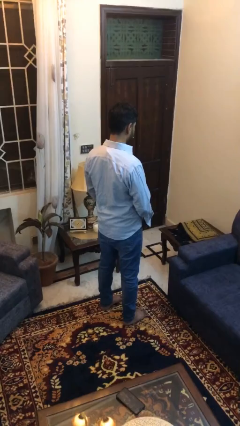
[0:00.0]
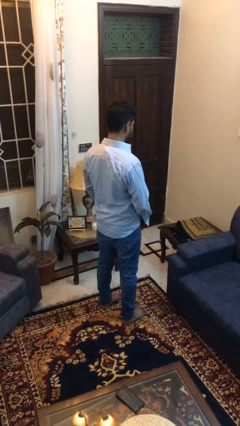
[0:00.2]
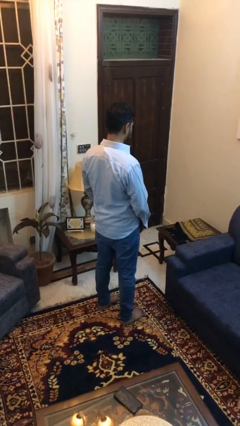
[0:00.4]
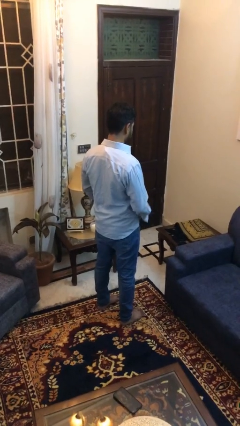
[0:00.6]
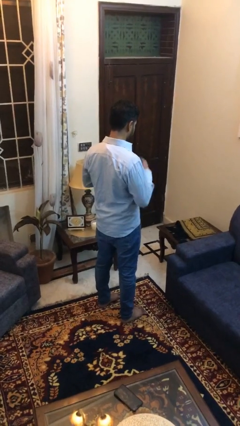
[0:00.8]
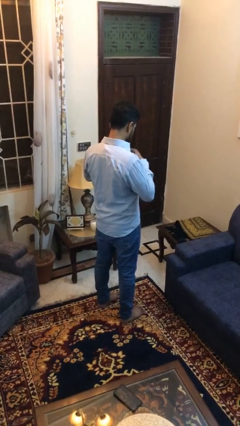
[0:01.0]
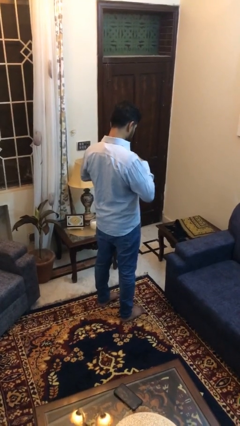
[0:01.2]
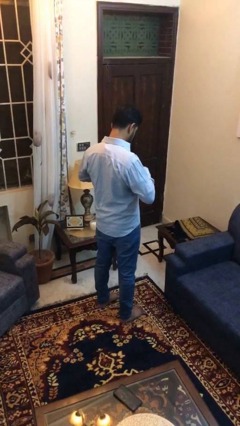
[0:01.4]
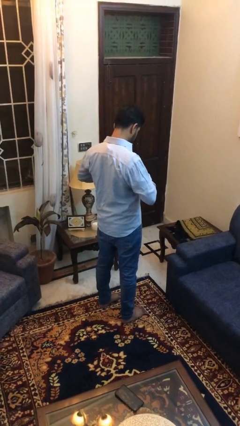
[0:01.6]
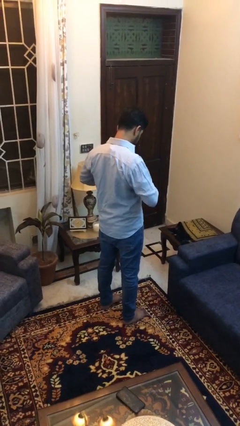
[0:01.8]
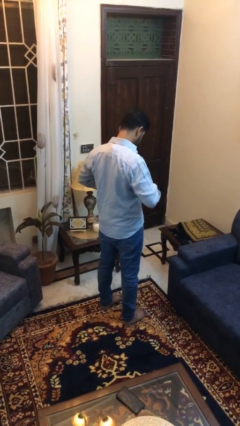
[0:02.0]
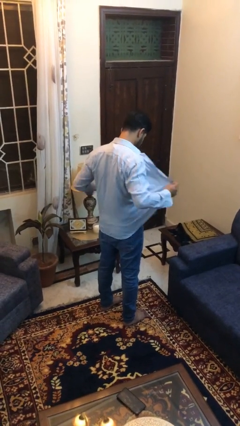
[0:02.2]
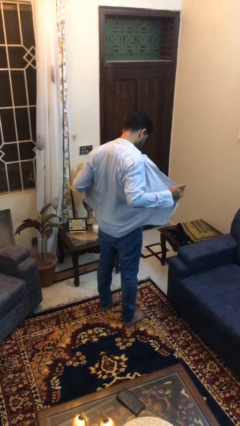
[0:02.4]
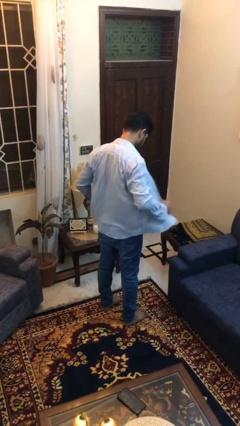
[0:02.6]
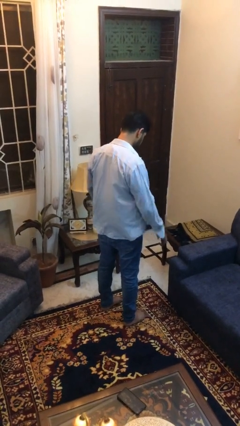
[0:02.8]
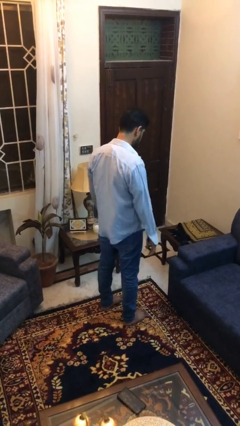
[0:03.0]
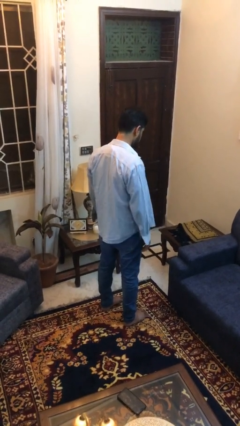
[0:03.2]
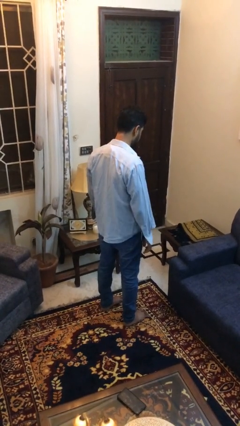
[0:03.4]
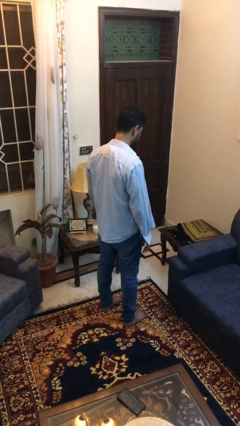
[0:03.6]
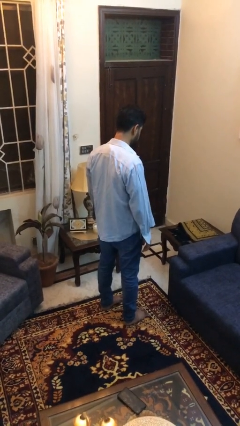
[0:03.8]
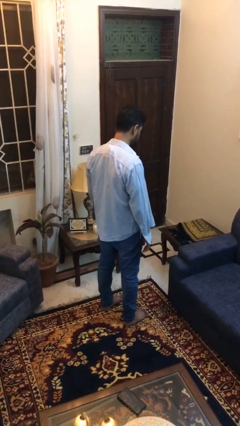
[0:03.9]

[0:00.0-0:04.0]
person unbuttons shirt

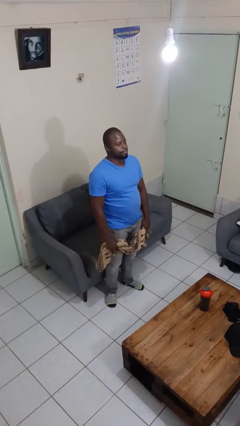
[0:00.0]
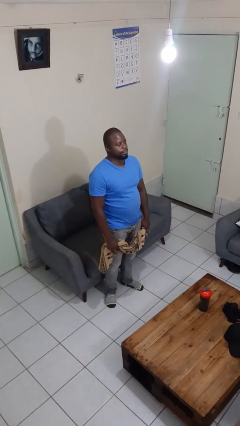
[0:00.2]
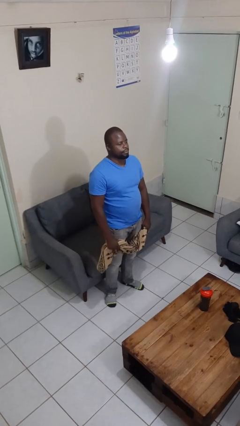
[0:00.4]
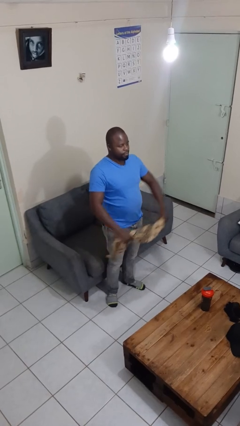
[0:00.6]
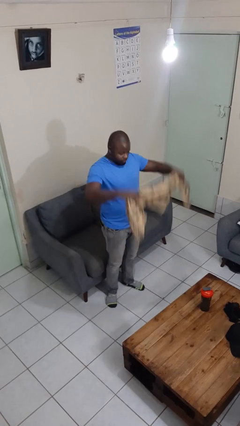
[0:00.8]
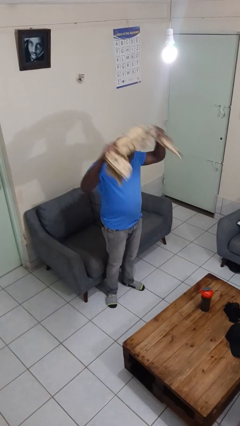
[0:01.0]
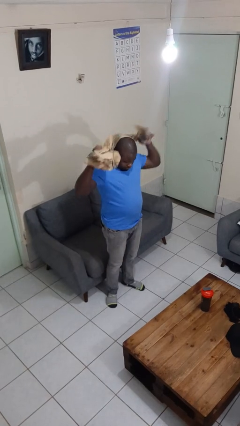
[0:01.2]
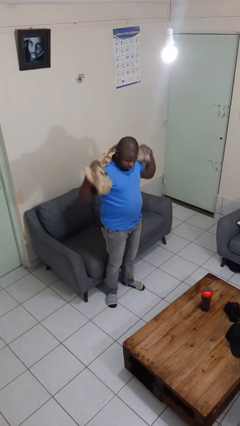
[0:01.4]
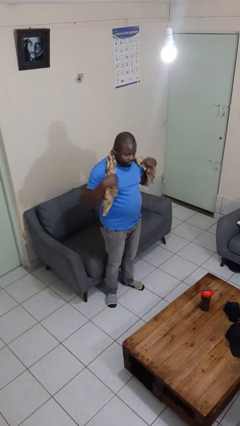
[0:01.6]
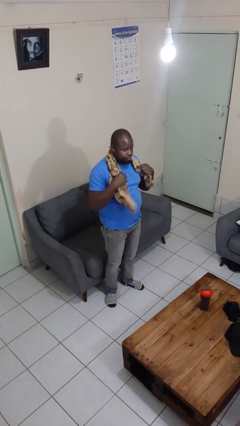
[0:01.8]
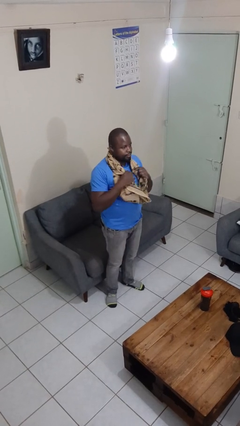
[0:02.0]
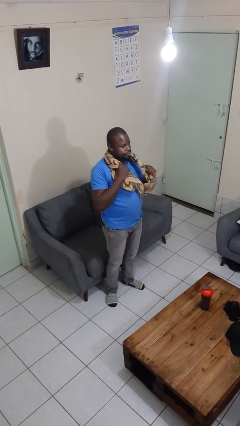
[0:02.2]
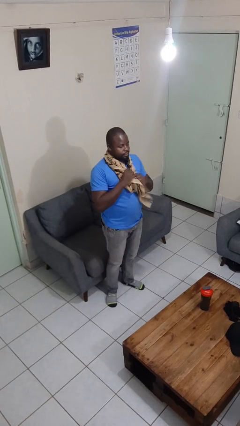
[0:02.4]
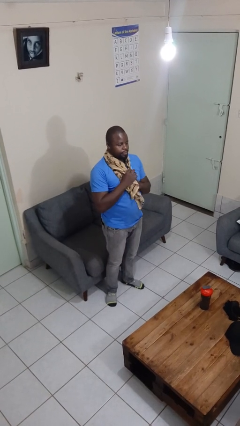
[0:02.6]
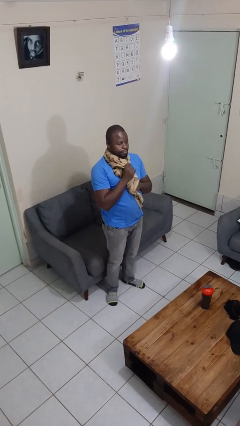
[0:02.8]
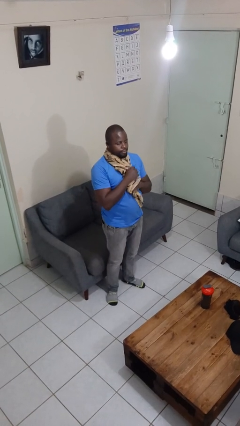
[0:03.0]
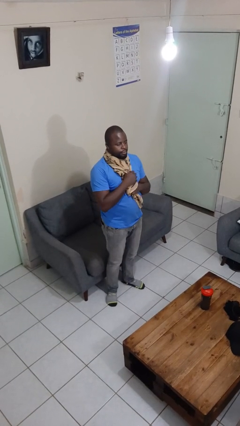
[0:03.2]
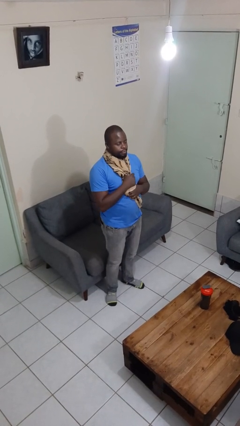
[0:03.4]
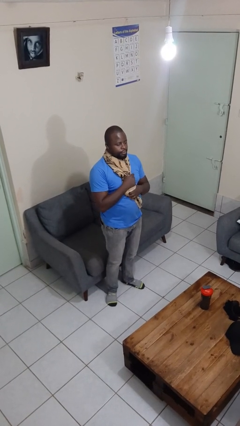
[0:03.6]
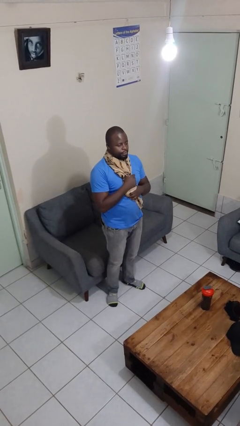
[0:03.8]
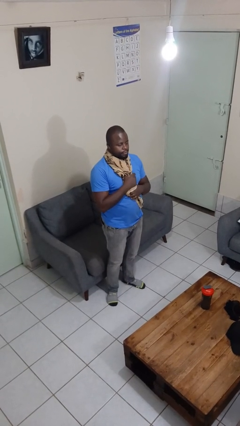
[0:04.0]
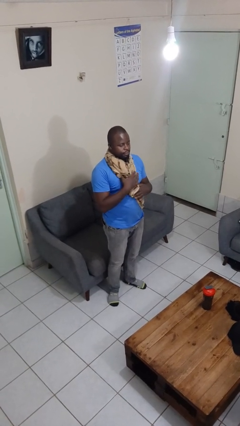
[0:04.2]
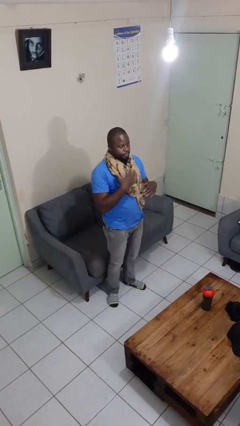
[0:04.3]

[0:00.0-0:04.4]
person puts on scarf

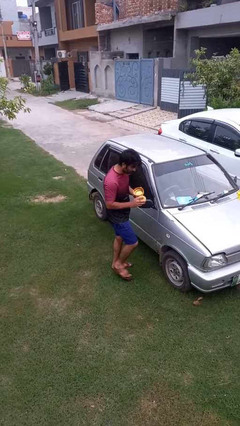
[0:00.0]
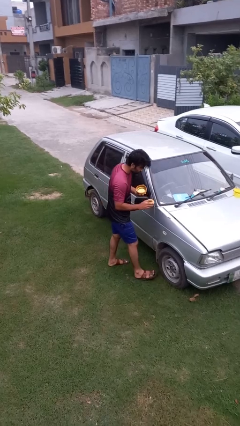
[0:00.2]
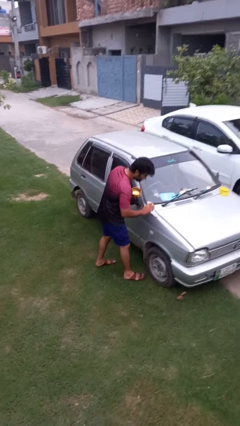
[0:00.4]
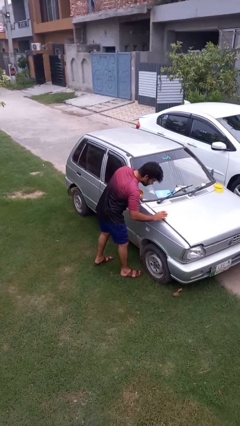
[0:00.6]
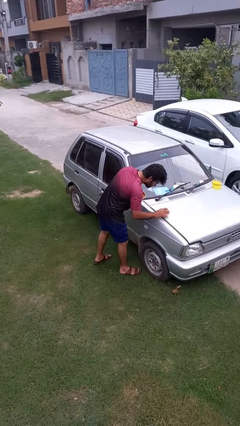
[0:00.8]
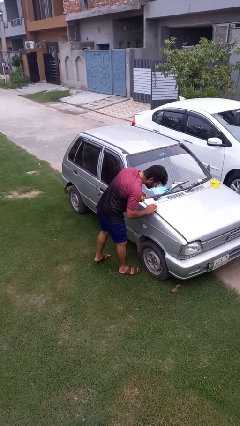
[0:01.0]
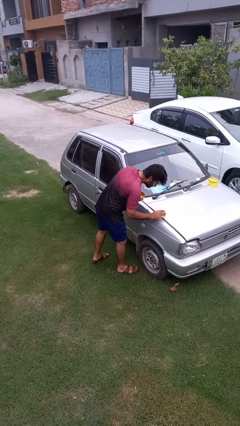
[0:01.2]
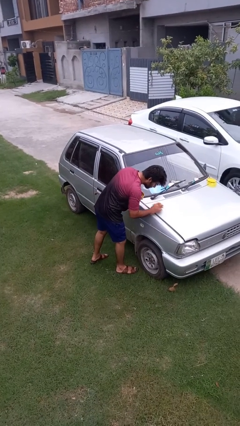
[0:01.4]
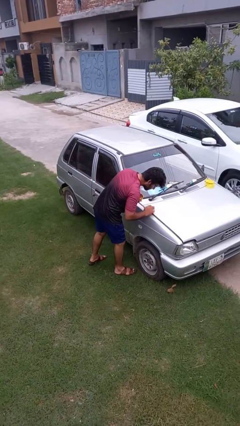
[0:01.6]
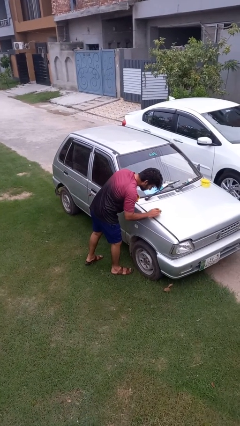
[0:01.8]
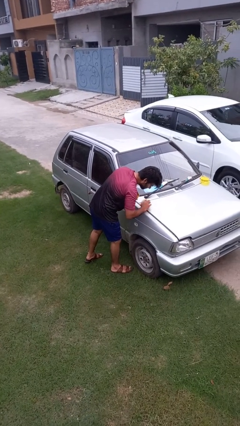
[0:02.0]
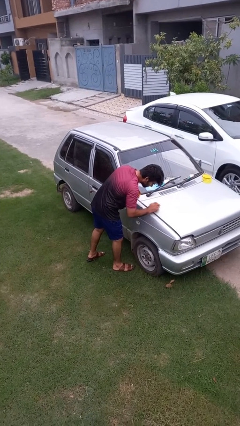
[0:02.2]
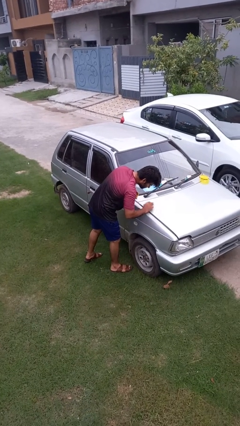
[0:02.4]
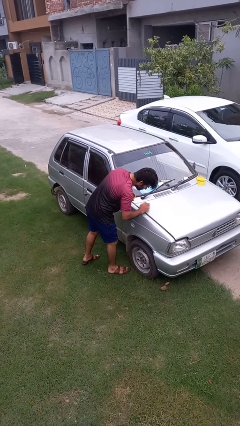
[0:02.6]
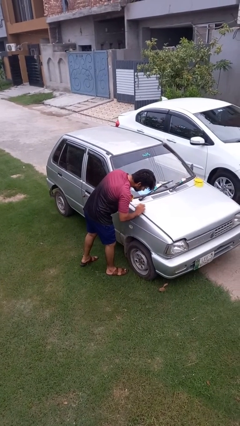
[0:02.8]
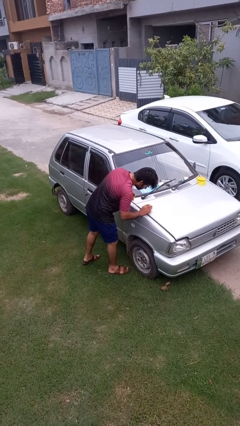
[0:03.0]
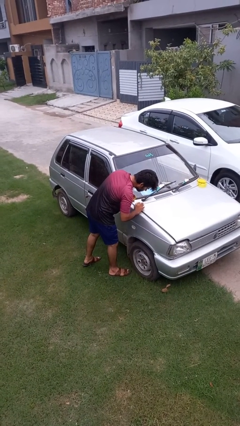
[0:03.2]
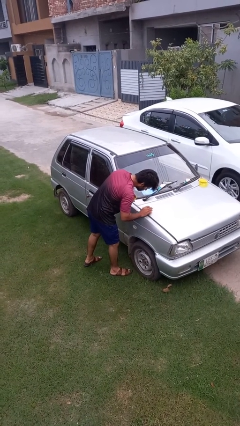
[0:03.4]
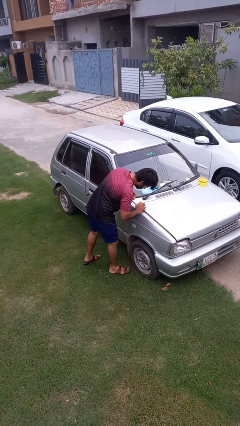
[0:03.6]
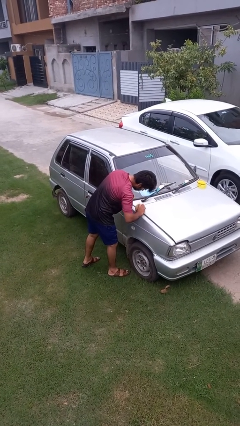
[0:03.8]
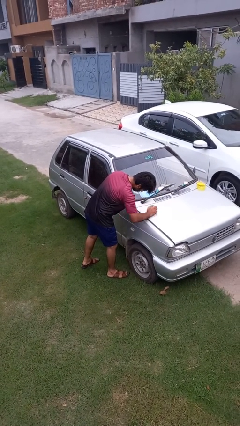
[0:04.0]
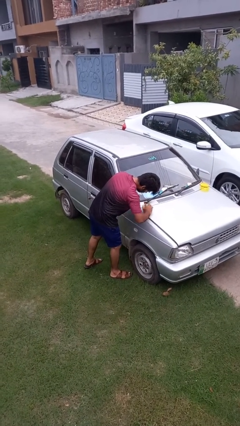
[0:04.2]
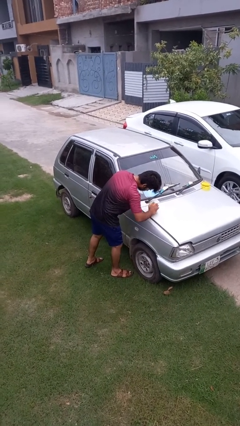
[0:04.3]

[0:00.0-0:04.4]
person polishes car with rag

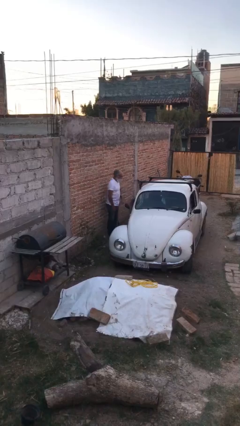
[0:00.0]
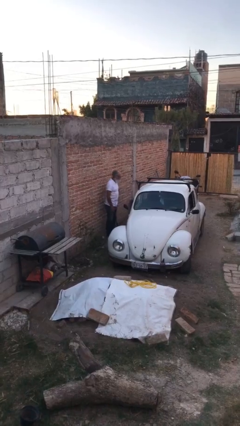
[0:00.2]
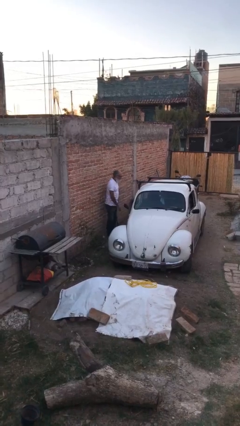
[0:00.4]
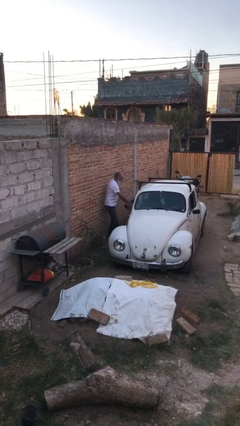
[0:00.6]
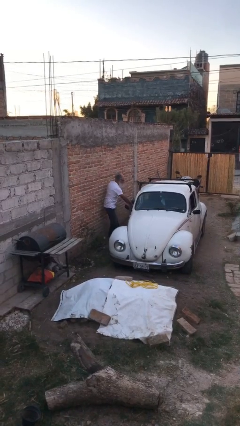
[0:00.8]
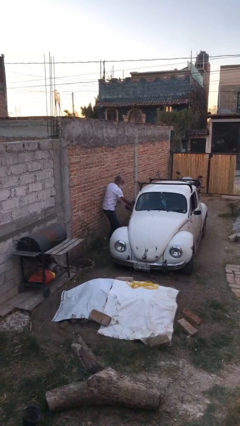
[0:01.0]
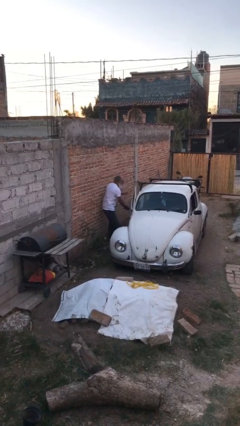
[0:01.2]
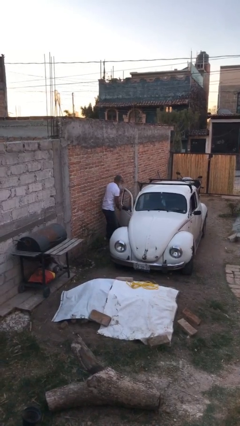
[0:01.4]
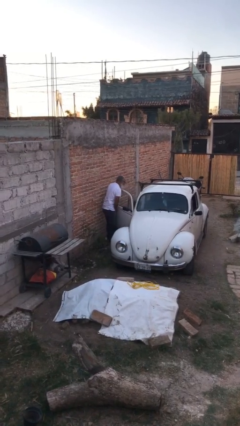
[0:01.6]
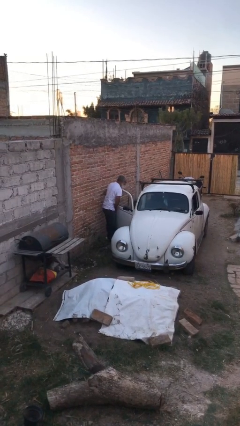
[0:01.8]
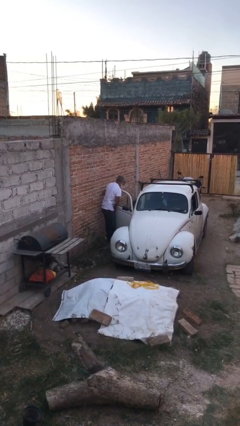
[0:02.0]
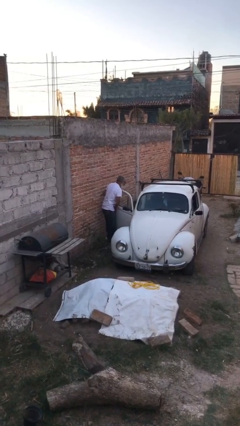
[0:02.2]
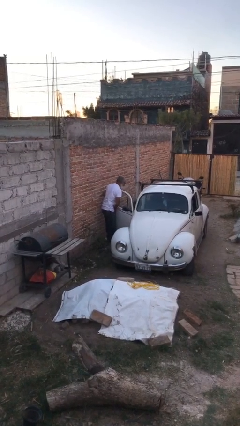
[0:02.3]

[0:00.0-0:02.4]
person opens car door

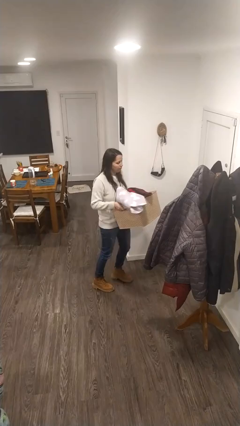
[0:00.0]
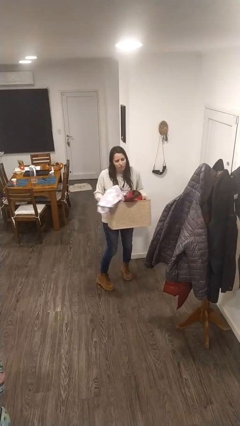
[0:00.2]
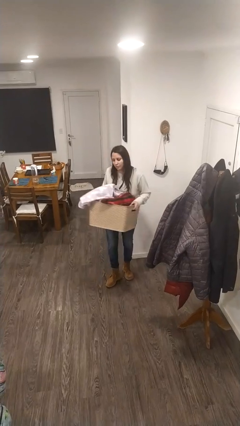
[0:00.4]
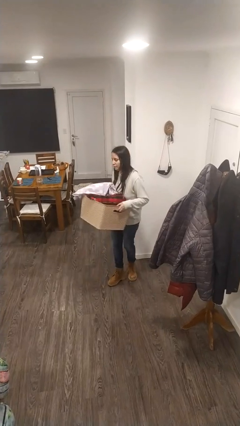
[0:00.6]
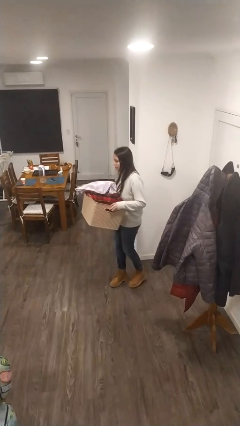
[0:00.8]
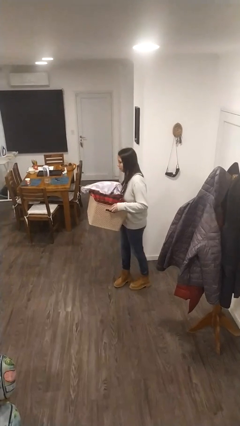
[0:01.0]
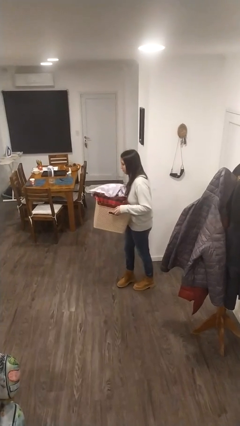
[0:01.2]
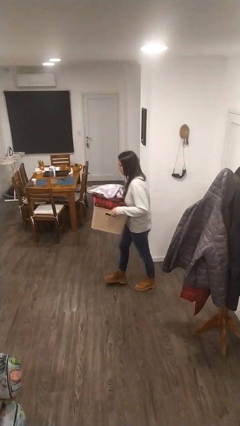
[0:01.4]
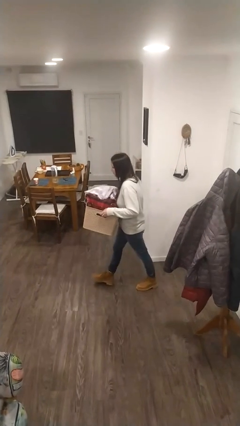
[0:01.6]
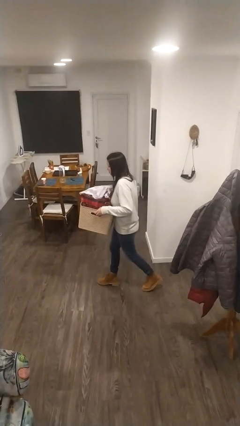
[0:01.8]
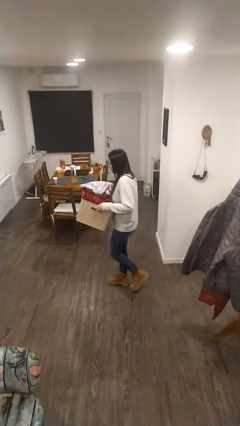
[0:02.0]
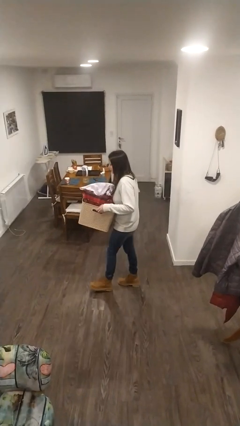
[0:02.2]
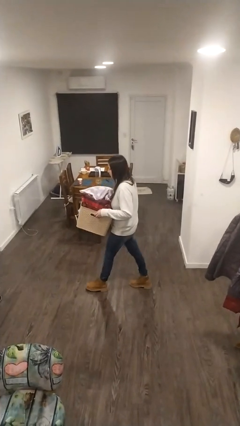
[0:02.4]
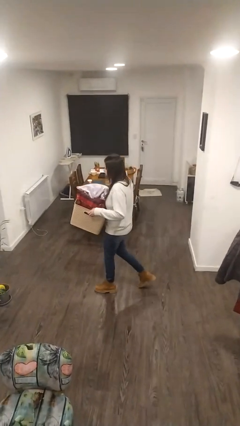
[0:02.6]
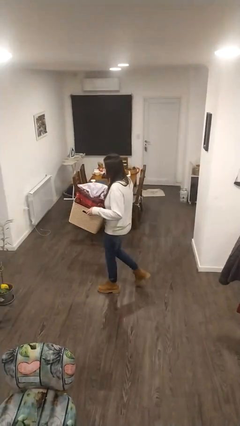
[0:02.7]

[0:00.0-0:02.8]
person carries laundry basket
